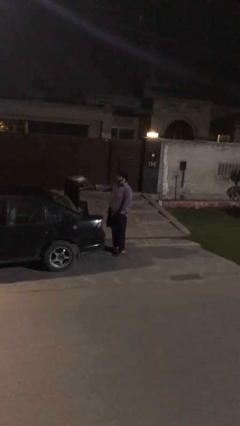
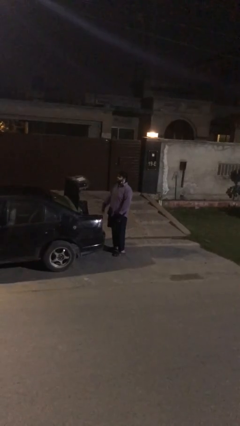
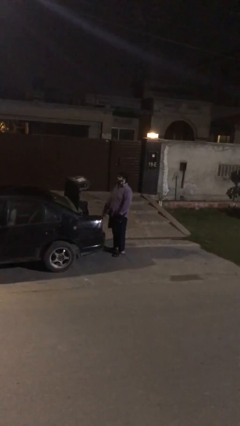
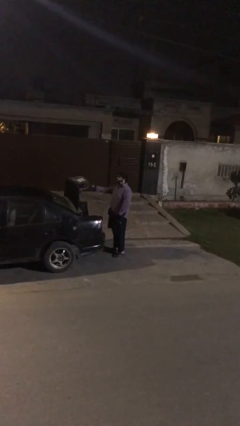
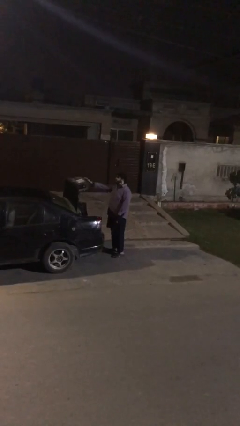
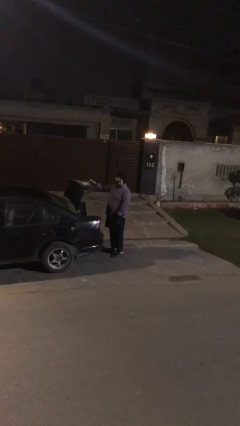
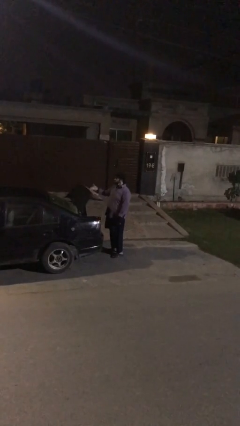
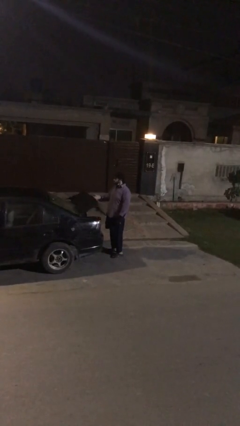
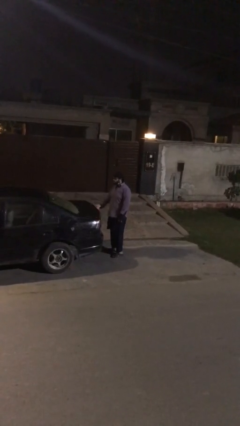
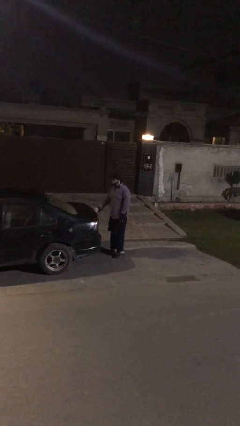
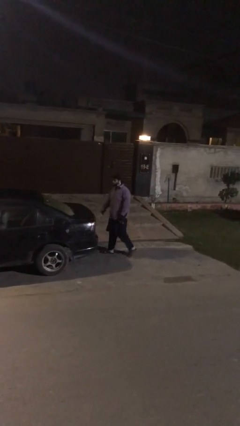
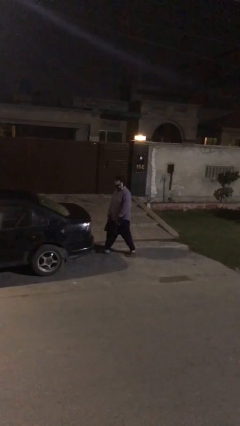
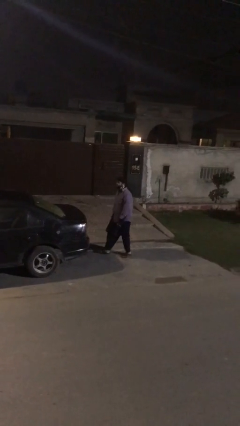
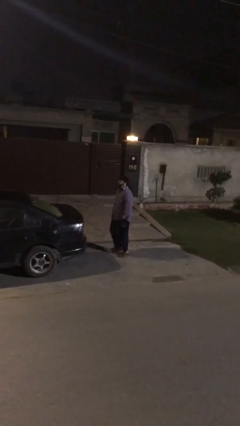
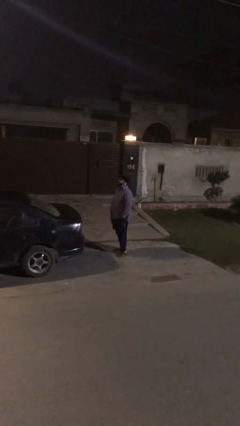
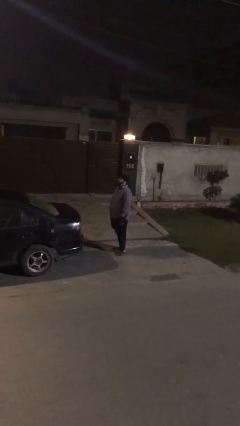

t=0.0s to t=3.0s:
person closes car trunk

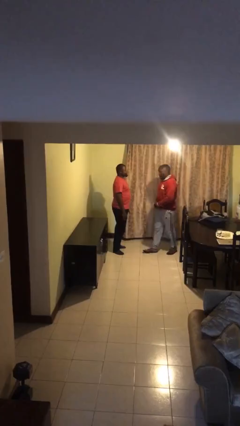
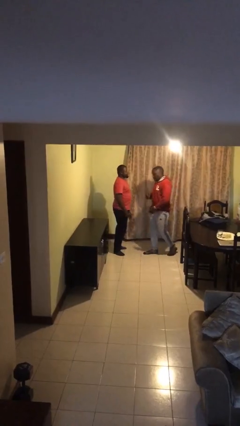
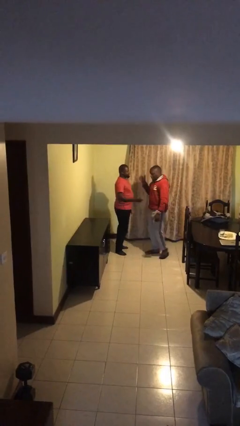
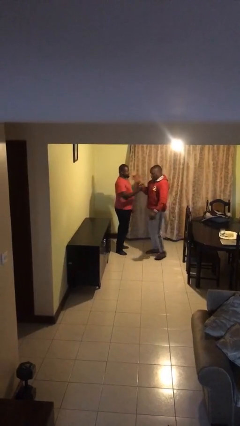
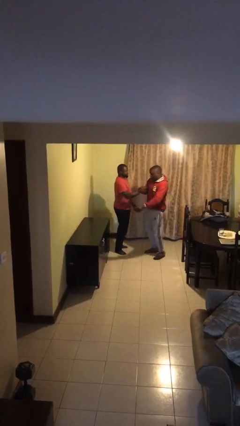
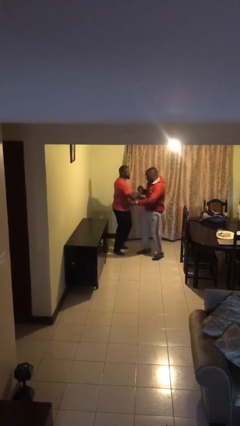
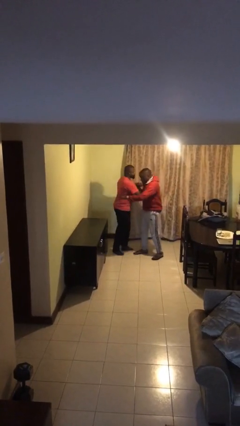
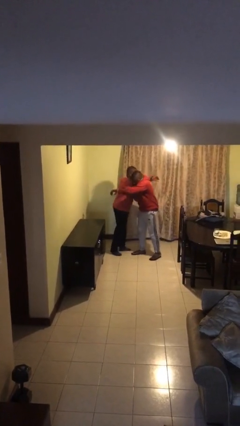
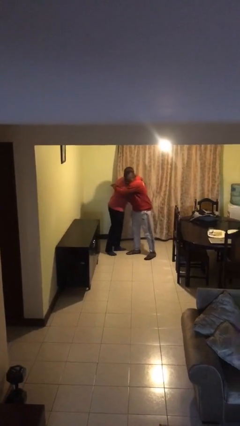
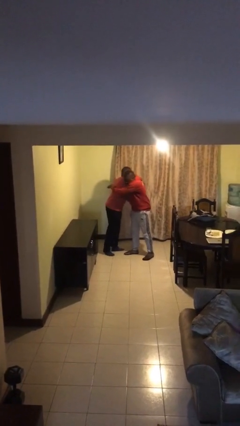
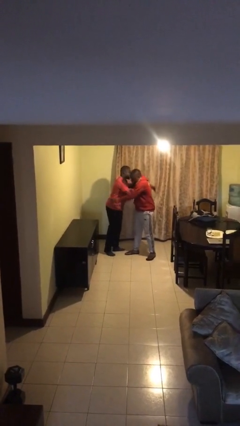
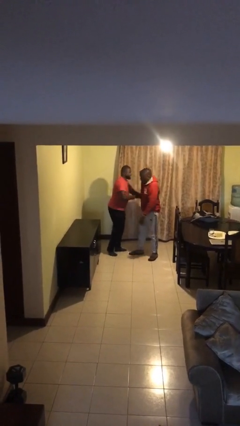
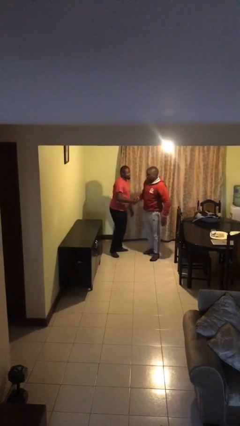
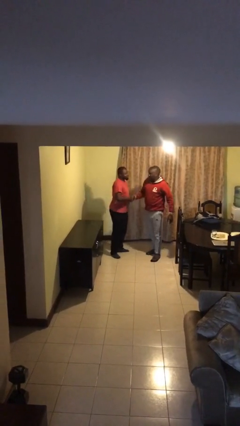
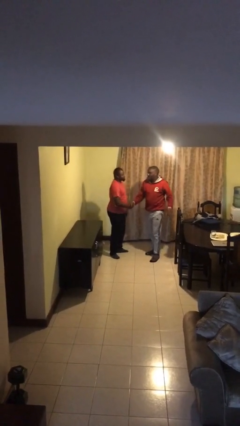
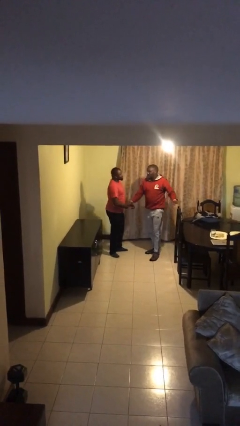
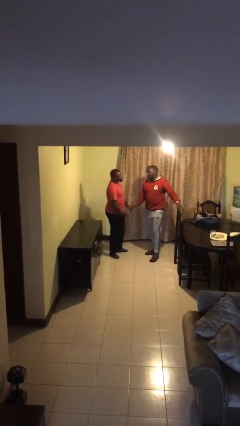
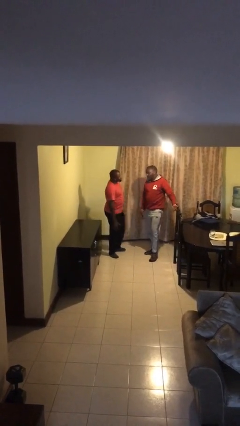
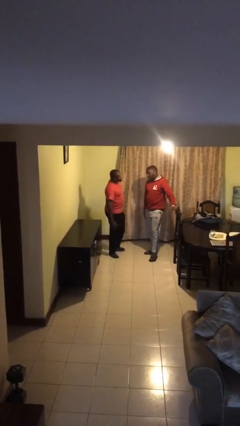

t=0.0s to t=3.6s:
person embraces person

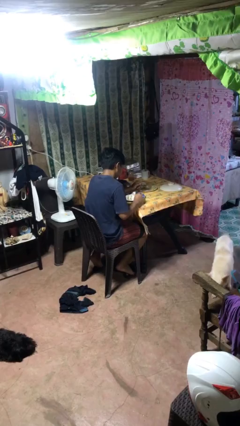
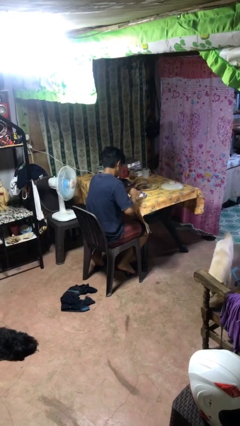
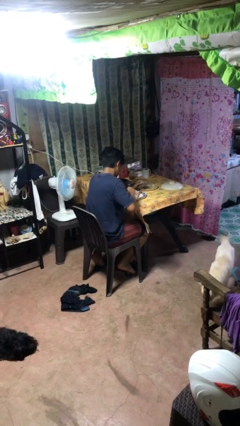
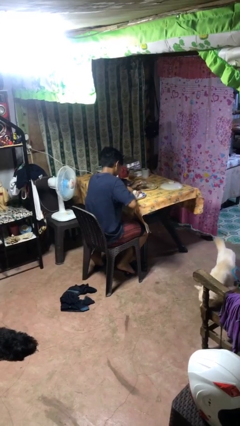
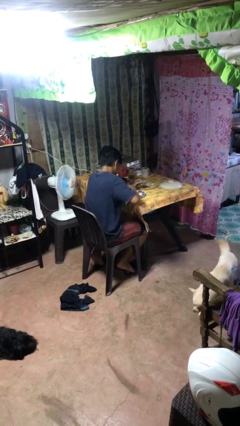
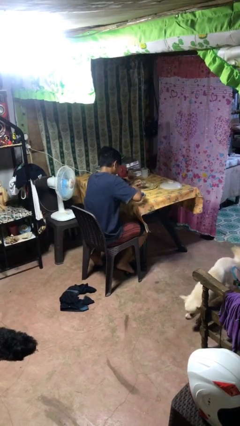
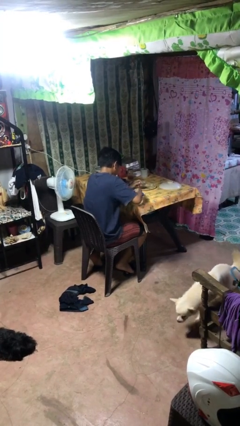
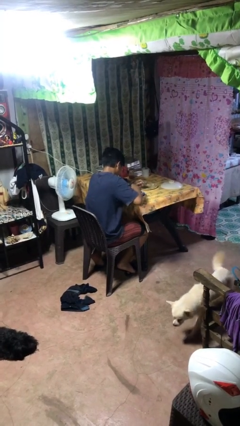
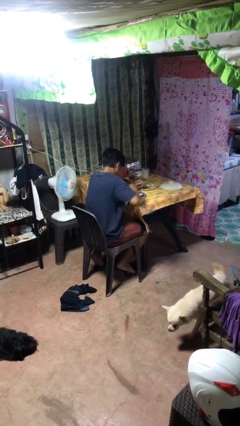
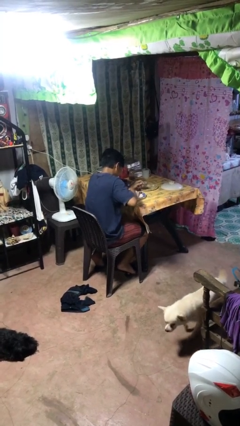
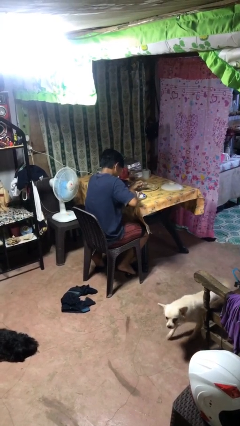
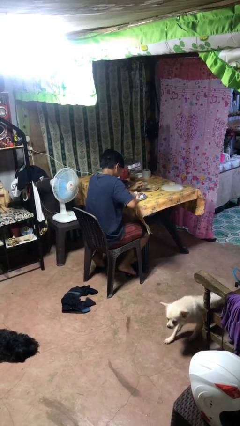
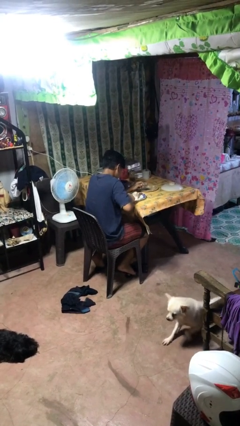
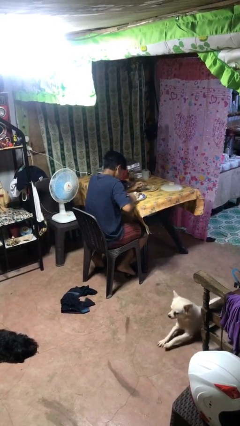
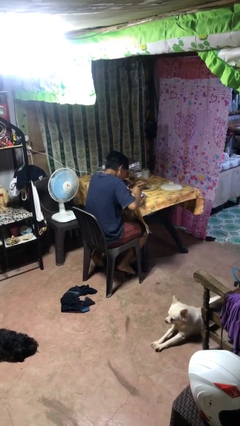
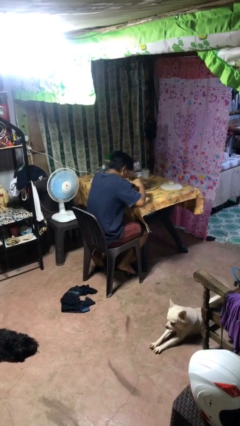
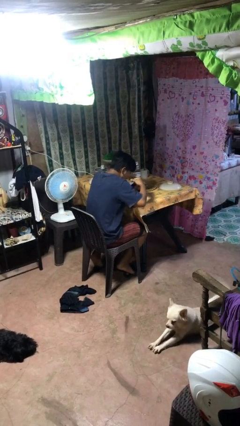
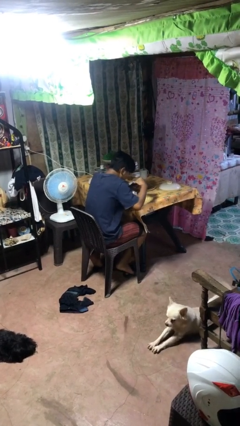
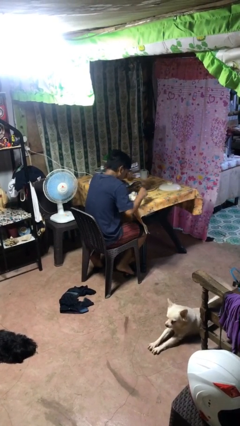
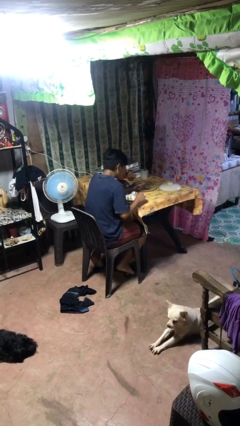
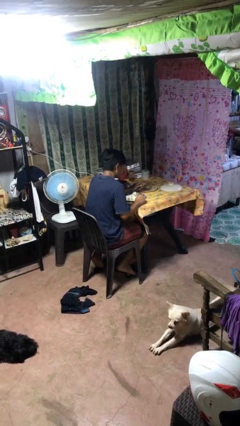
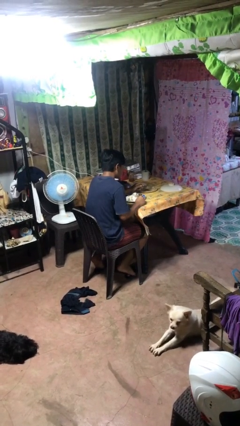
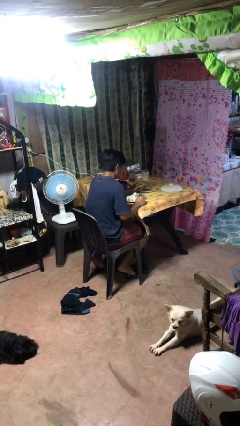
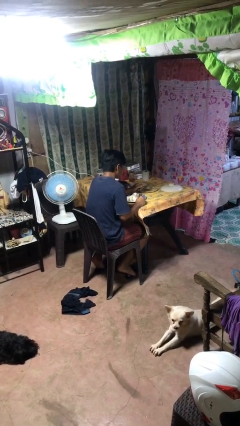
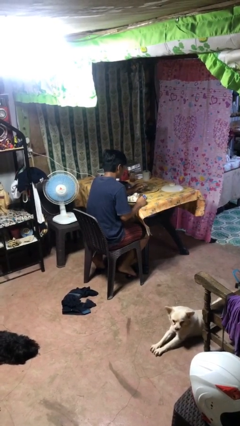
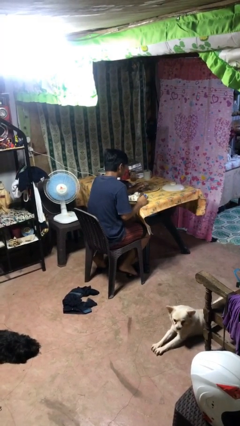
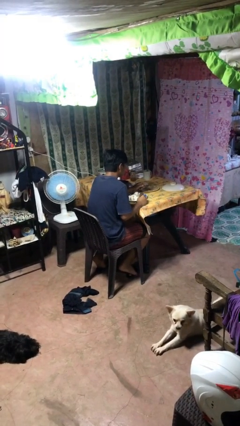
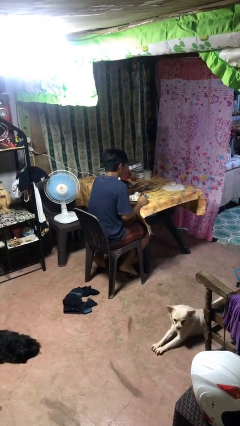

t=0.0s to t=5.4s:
person eats with utensil

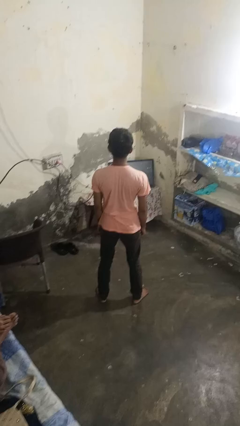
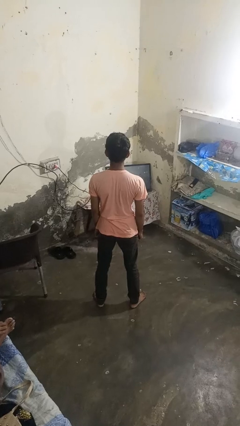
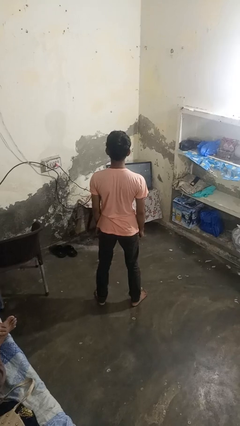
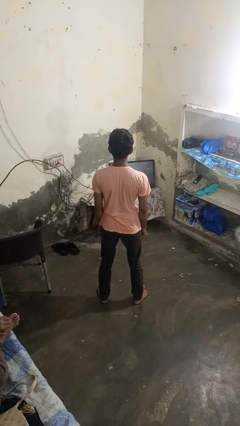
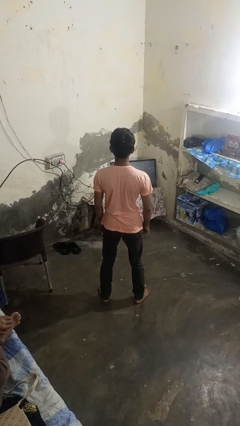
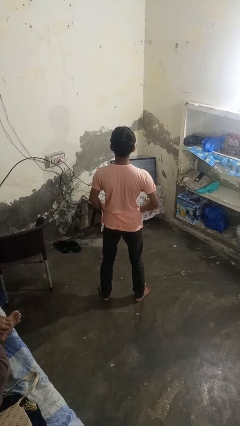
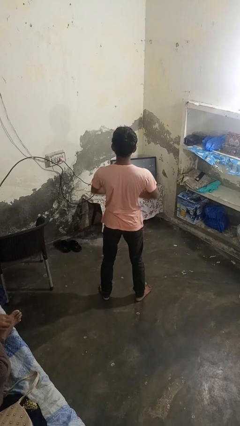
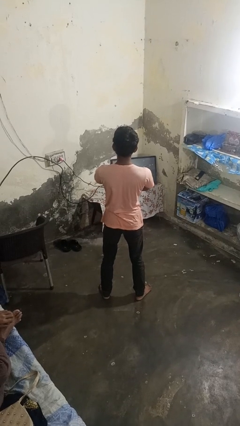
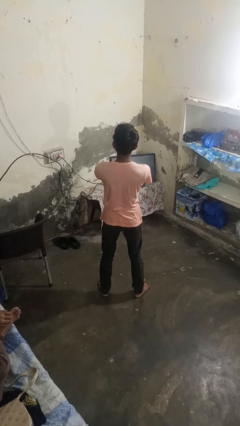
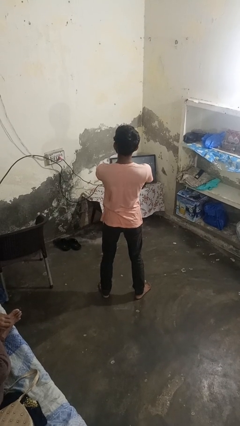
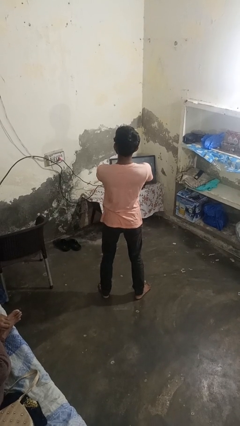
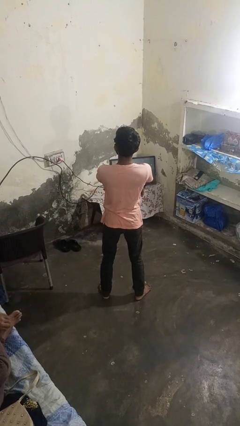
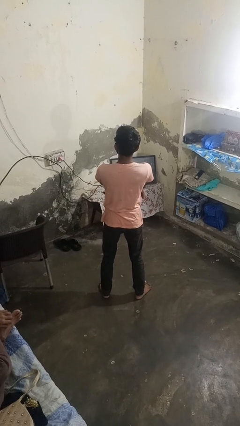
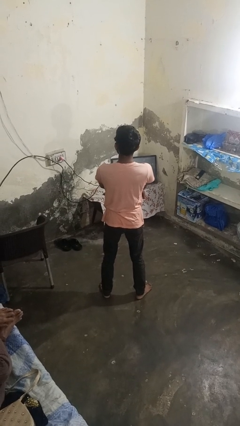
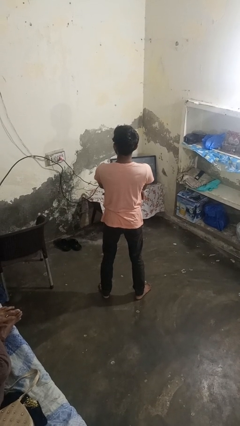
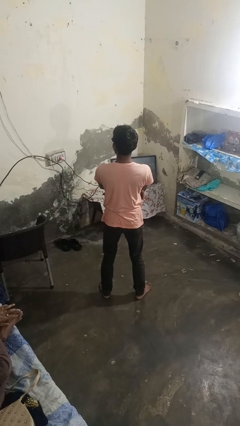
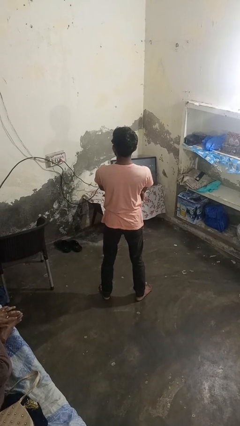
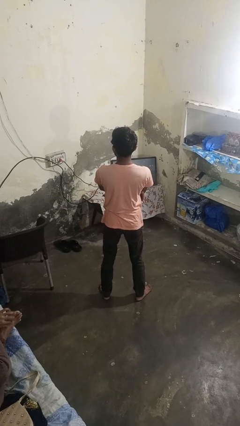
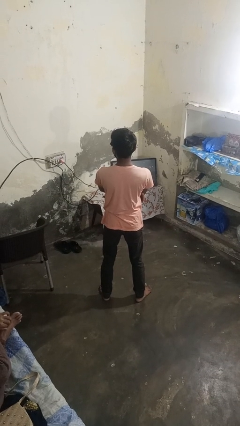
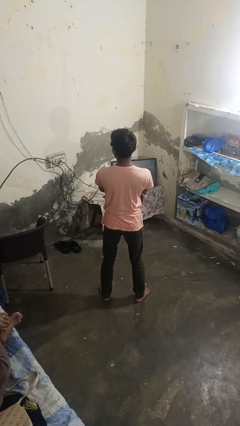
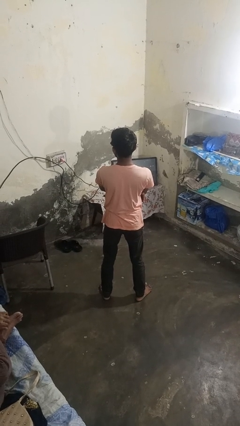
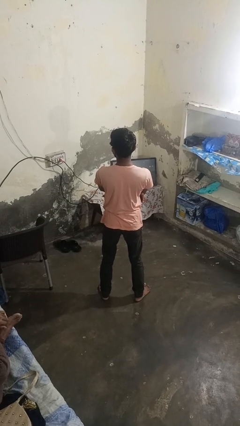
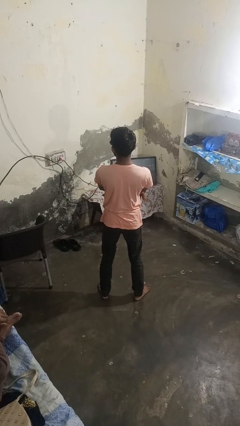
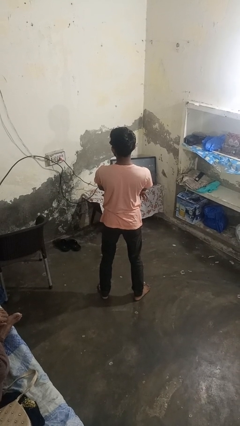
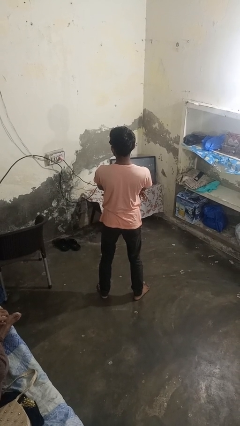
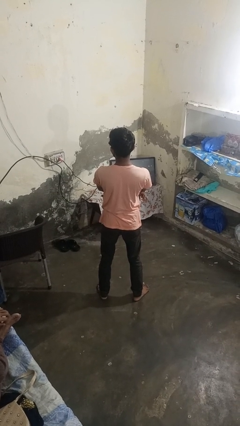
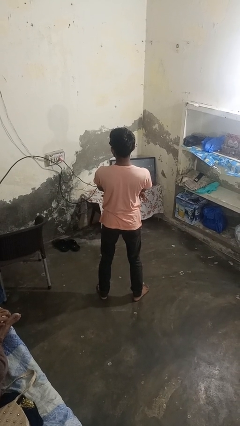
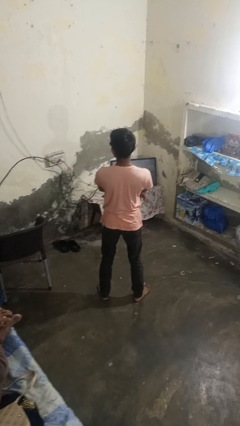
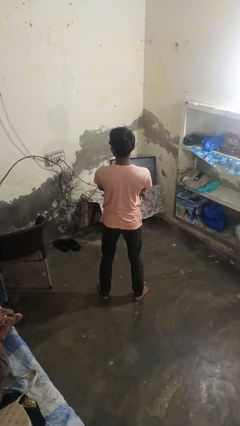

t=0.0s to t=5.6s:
person crosses arms
